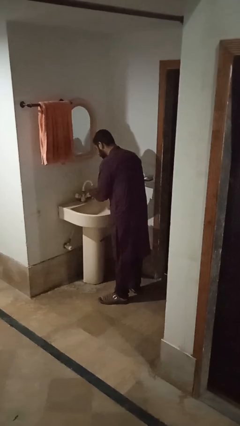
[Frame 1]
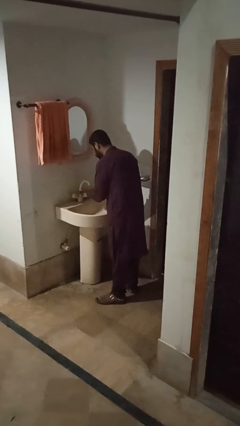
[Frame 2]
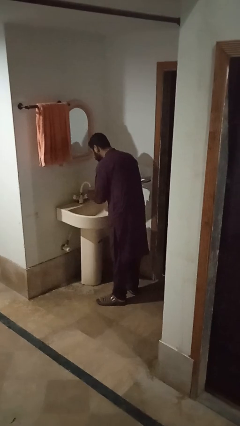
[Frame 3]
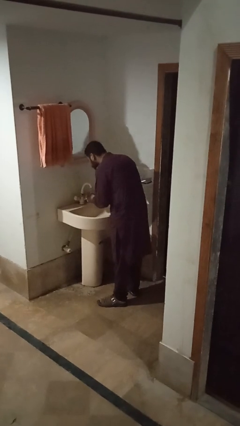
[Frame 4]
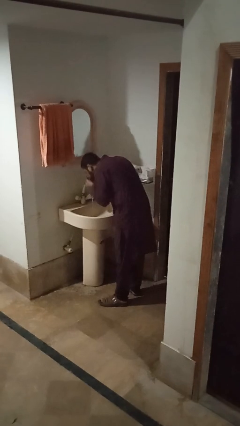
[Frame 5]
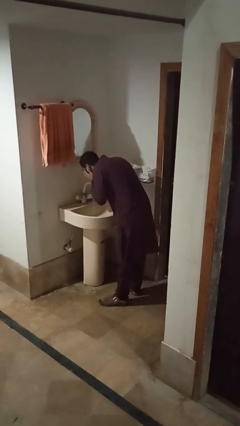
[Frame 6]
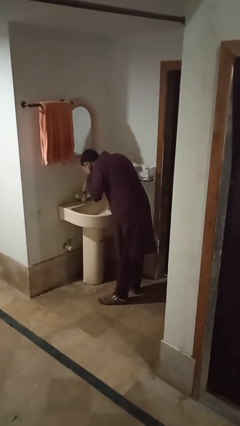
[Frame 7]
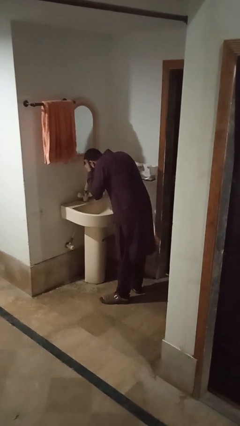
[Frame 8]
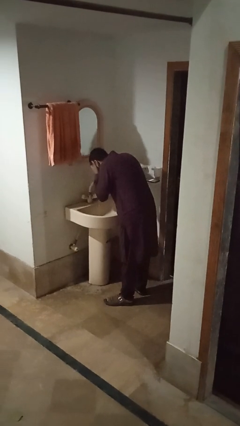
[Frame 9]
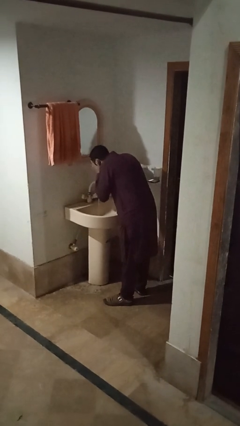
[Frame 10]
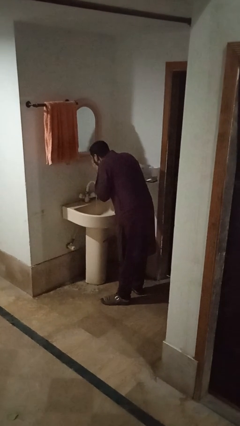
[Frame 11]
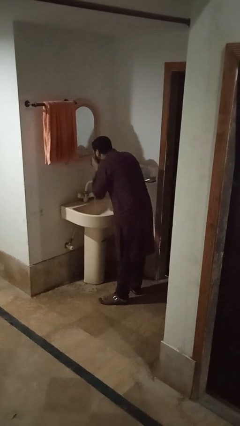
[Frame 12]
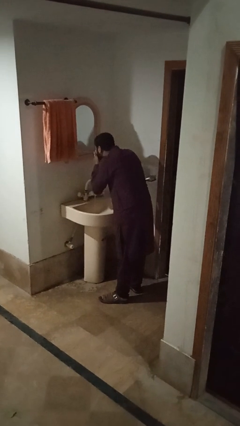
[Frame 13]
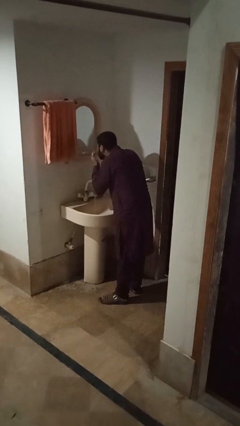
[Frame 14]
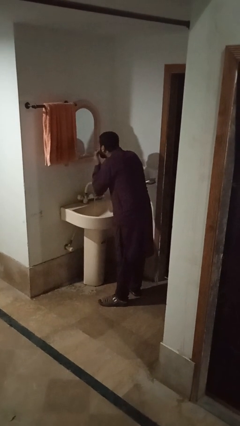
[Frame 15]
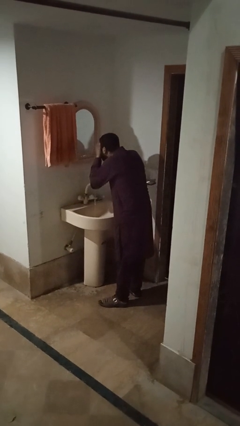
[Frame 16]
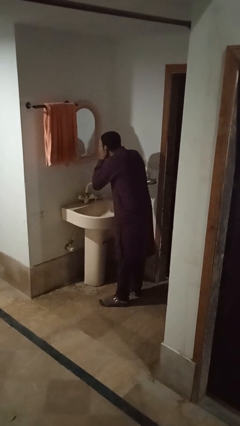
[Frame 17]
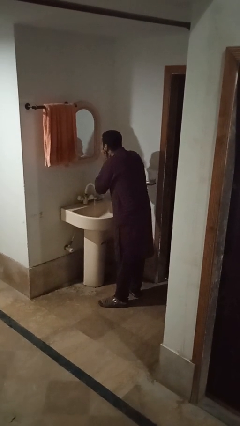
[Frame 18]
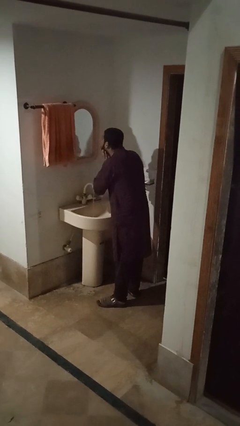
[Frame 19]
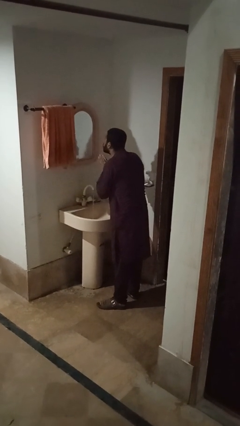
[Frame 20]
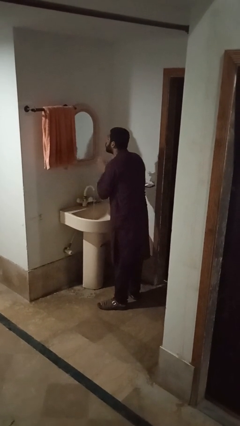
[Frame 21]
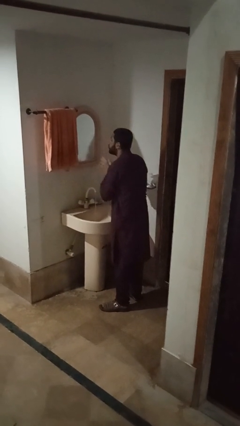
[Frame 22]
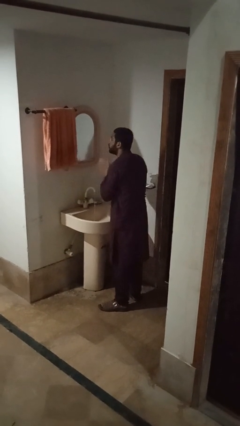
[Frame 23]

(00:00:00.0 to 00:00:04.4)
person washes face

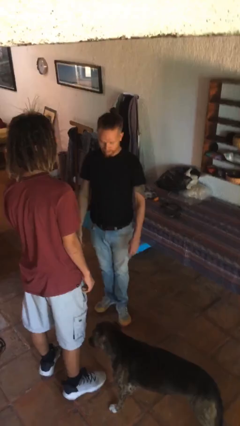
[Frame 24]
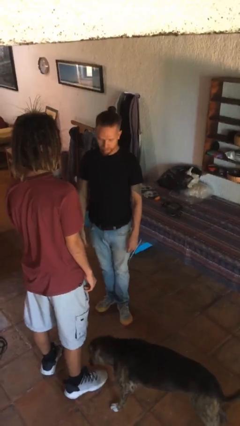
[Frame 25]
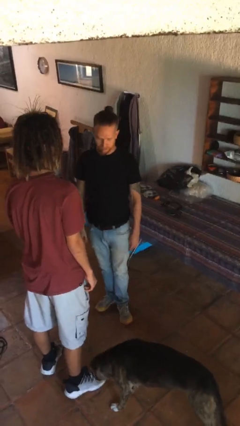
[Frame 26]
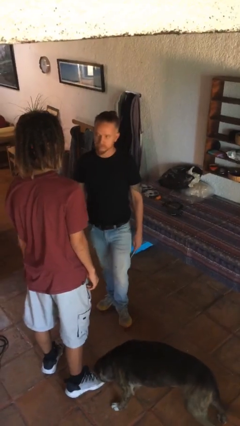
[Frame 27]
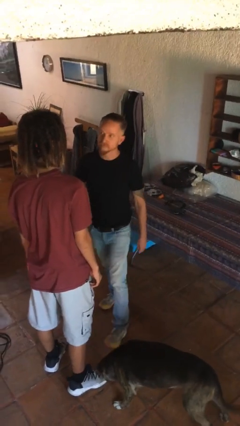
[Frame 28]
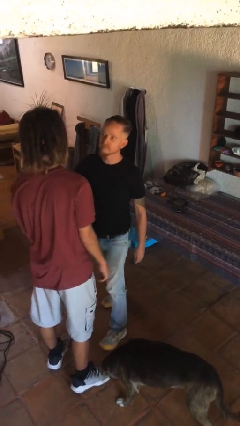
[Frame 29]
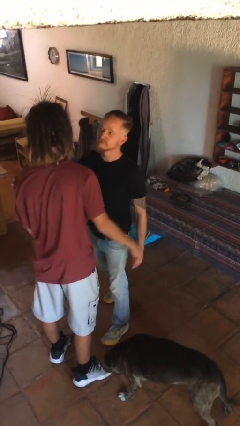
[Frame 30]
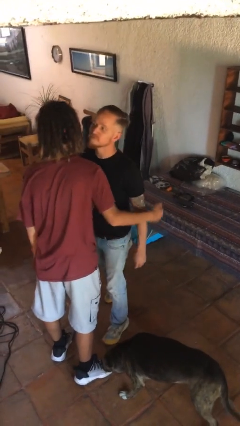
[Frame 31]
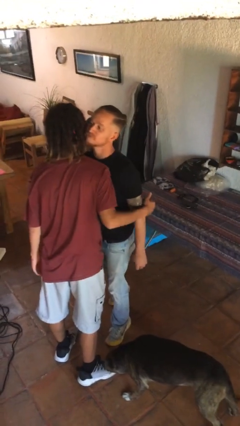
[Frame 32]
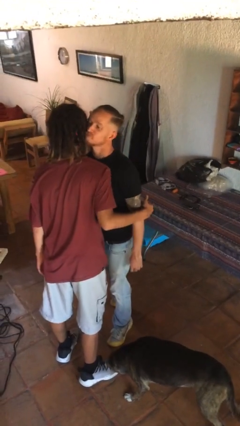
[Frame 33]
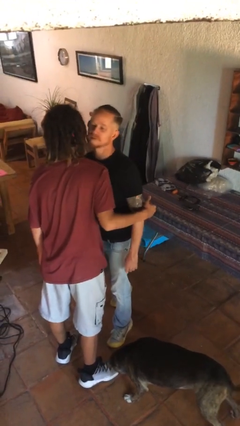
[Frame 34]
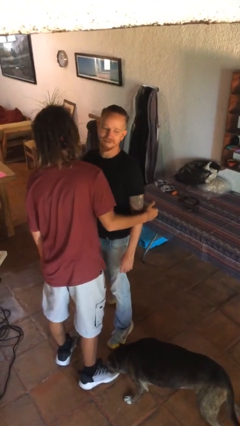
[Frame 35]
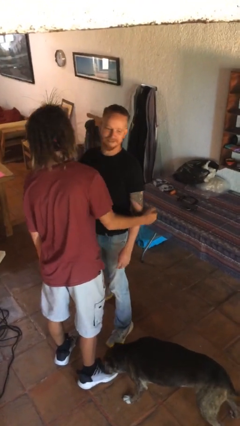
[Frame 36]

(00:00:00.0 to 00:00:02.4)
person kisses cheek of person

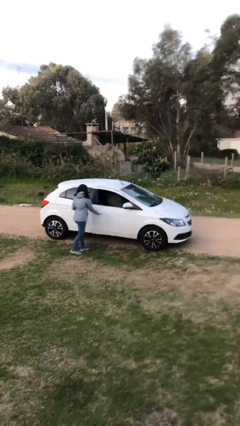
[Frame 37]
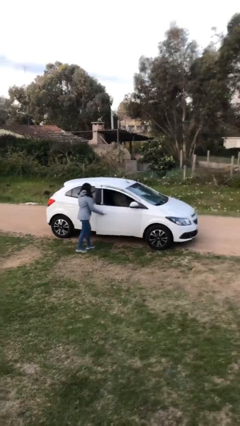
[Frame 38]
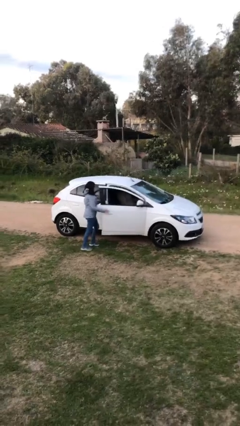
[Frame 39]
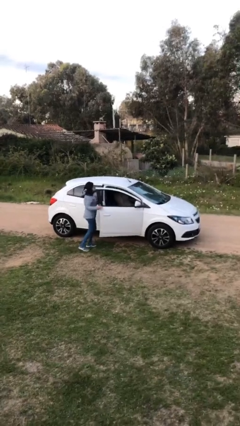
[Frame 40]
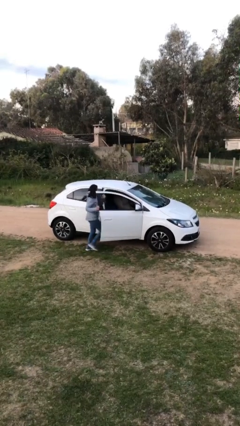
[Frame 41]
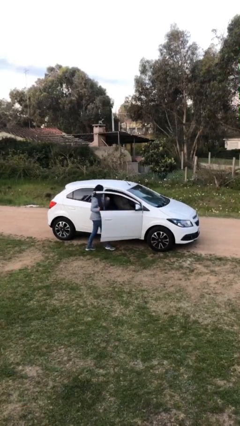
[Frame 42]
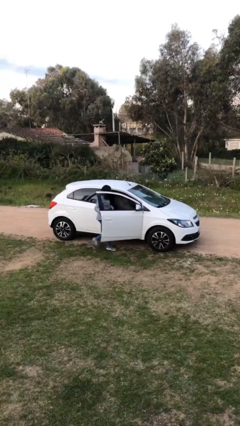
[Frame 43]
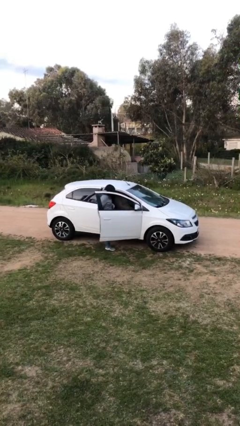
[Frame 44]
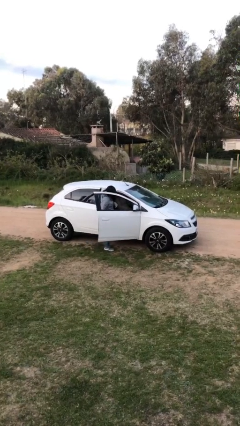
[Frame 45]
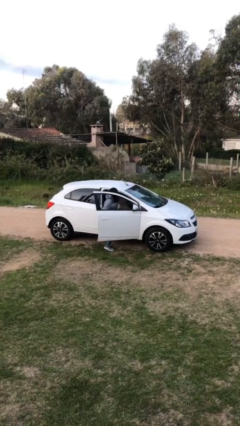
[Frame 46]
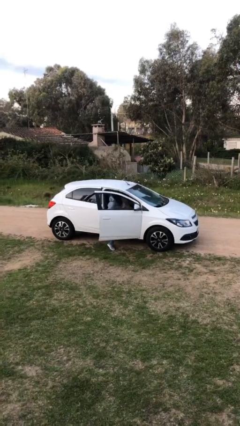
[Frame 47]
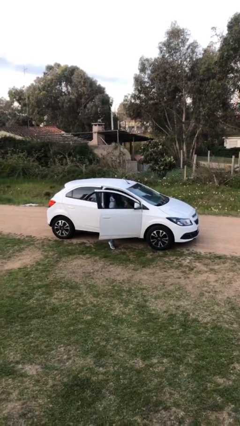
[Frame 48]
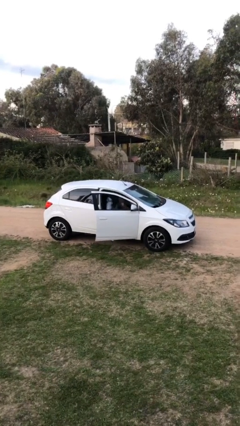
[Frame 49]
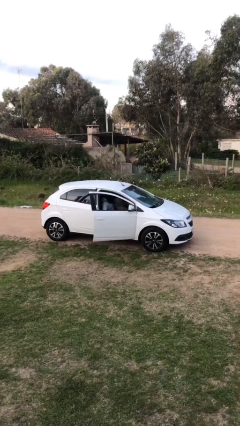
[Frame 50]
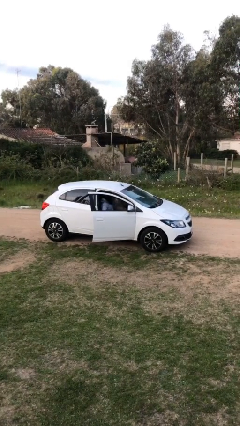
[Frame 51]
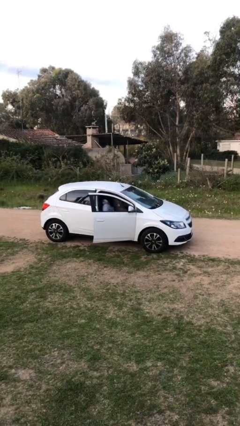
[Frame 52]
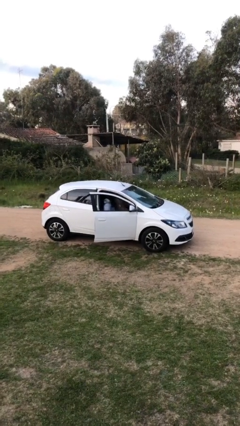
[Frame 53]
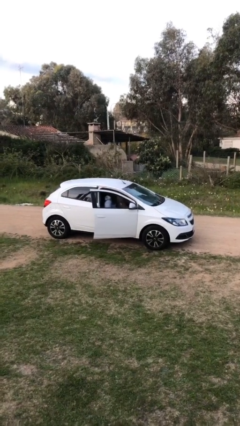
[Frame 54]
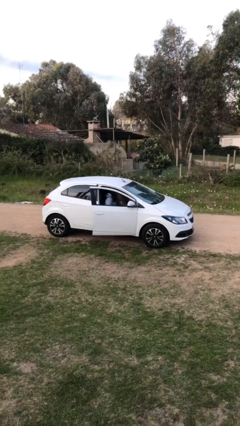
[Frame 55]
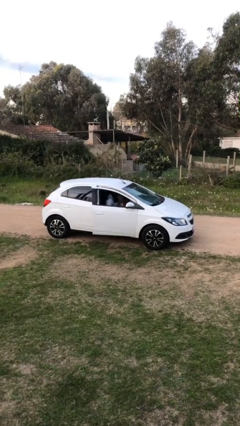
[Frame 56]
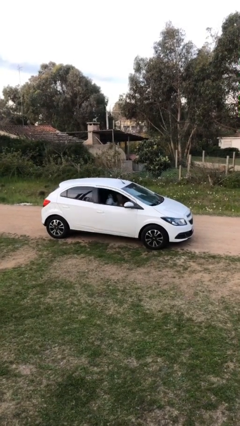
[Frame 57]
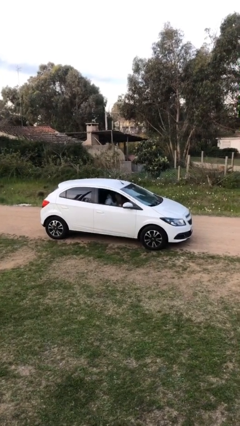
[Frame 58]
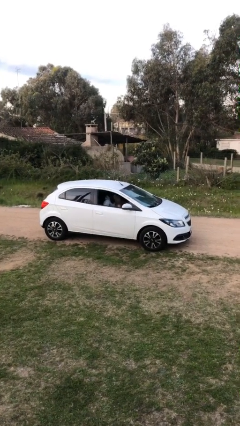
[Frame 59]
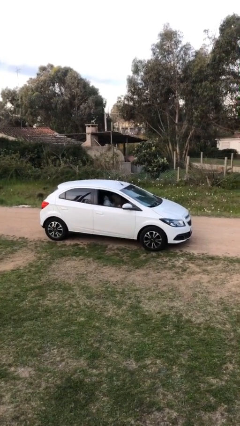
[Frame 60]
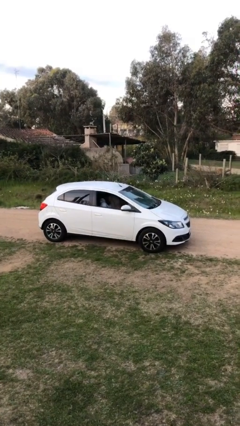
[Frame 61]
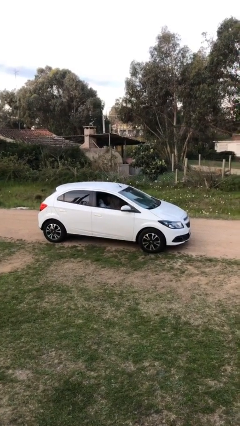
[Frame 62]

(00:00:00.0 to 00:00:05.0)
car picks up person

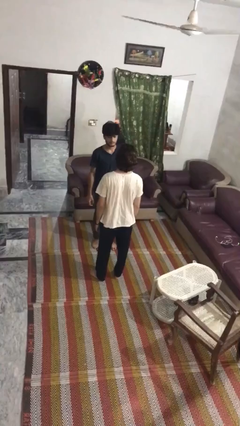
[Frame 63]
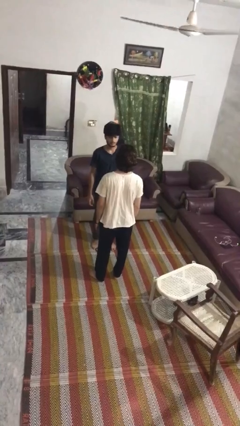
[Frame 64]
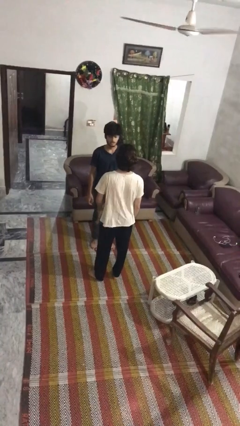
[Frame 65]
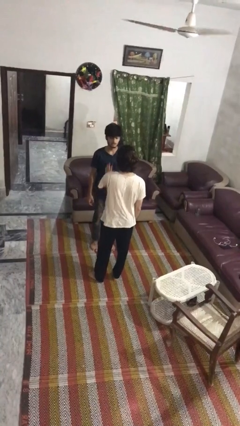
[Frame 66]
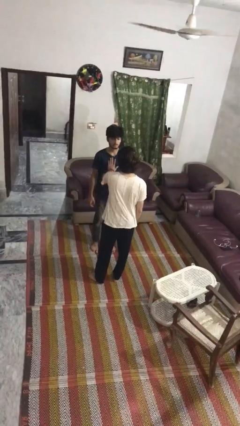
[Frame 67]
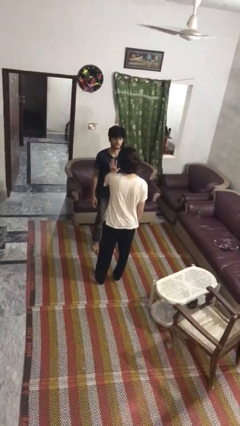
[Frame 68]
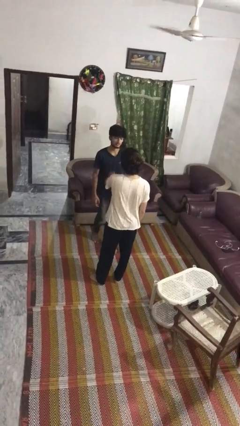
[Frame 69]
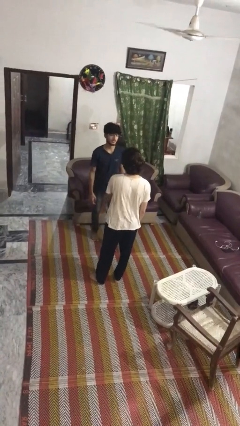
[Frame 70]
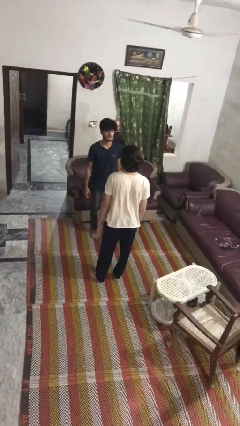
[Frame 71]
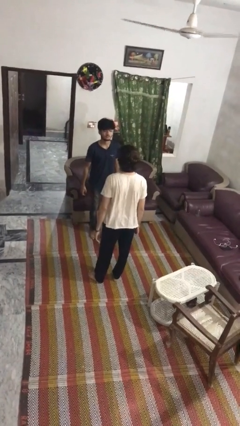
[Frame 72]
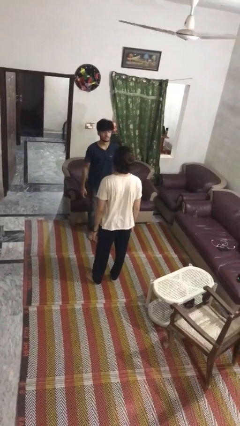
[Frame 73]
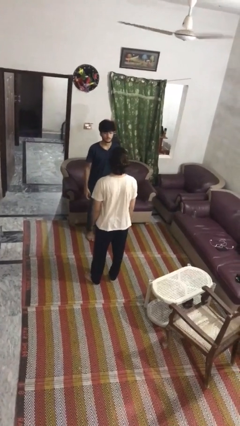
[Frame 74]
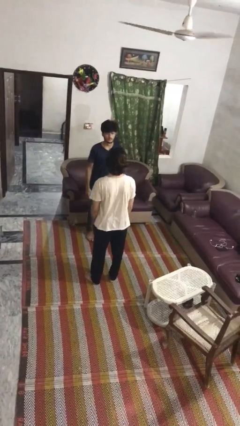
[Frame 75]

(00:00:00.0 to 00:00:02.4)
person shoves person

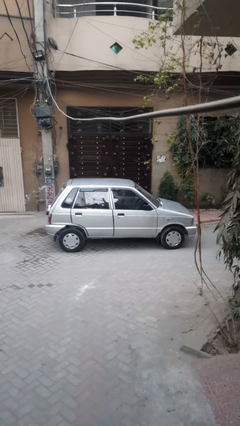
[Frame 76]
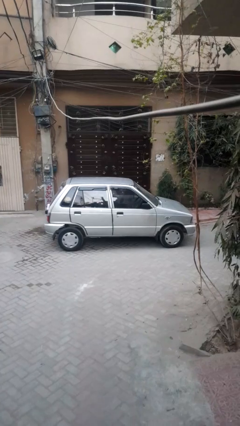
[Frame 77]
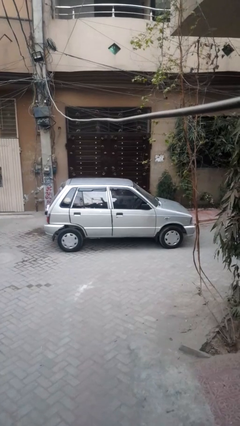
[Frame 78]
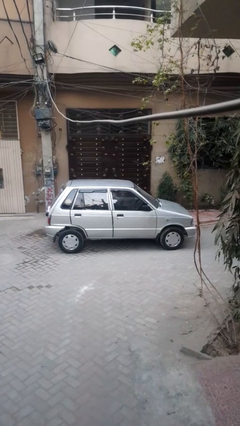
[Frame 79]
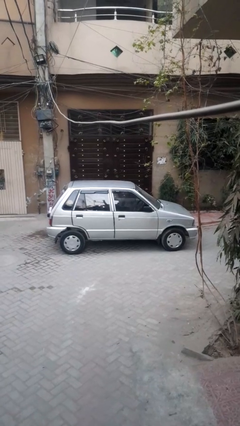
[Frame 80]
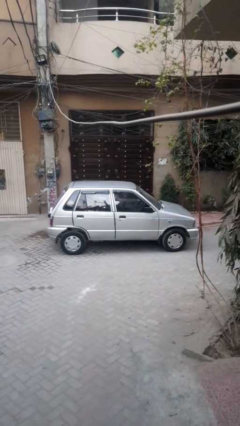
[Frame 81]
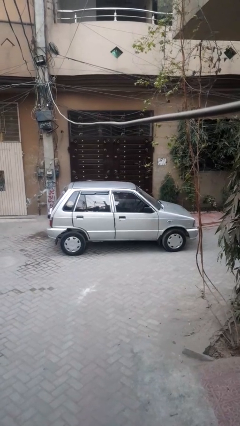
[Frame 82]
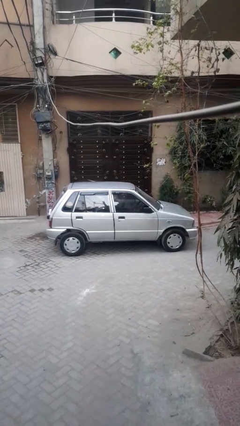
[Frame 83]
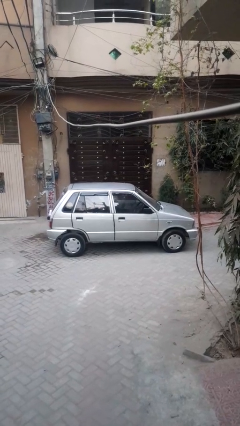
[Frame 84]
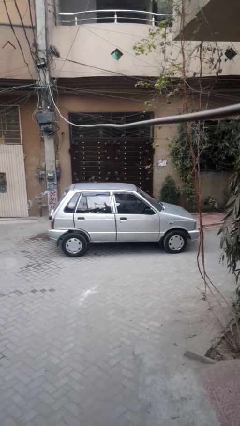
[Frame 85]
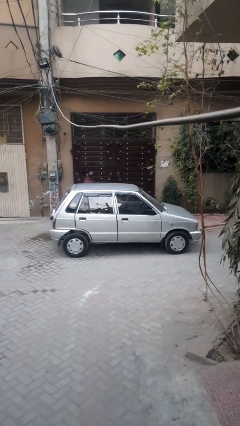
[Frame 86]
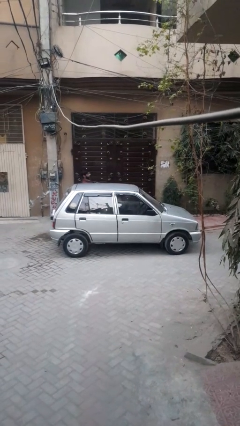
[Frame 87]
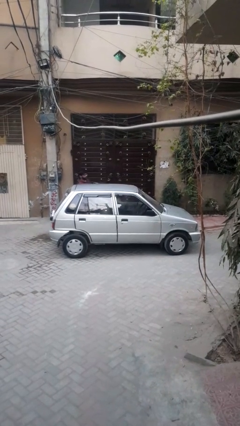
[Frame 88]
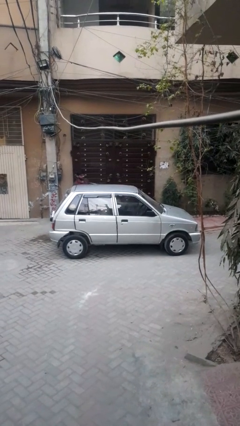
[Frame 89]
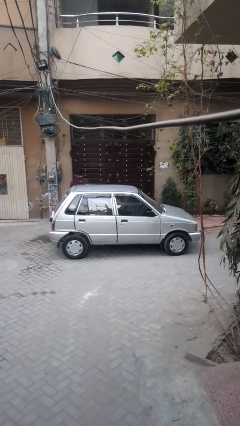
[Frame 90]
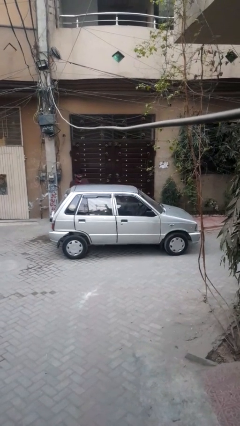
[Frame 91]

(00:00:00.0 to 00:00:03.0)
car drops off person

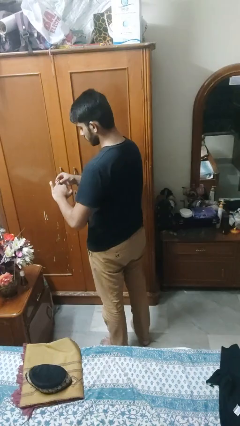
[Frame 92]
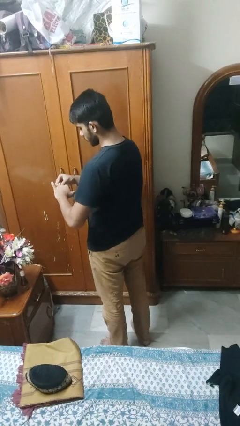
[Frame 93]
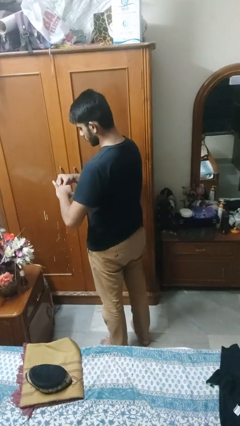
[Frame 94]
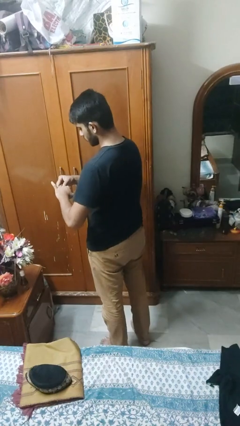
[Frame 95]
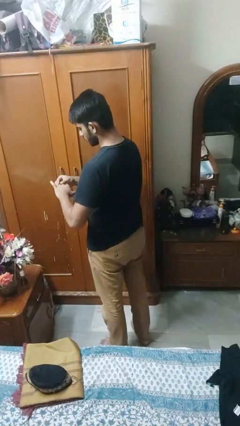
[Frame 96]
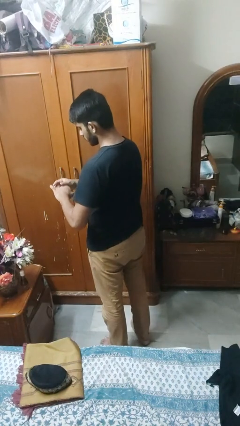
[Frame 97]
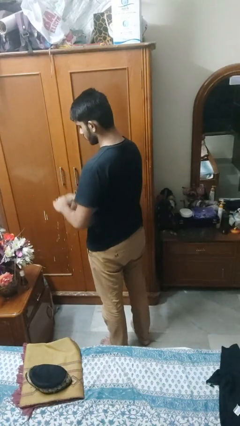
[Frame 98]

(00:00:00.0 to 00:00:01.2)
person puts on ring
